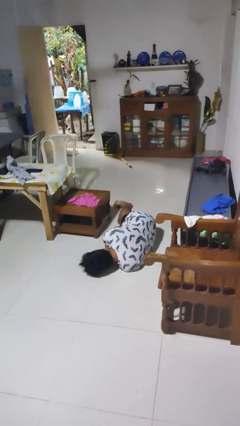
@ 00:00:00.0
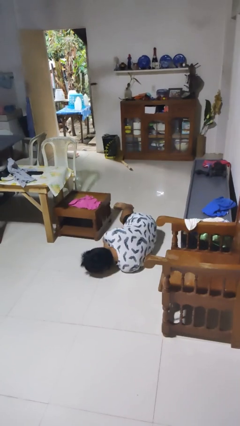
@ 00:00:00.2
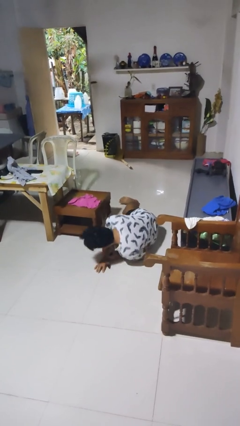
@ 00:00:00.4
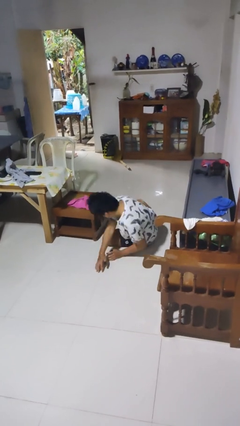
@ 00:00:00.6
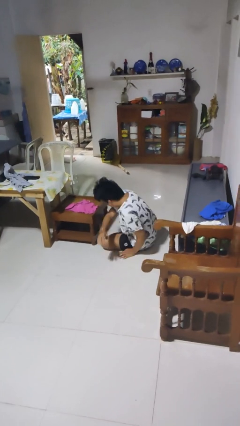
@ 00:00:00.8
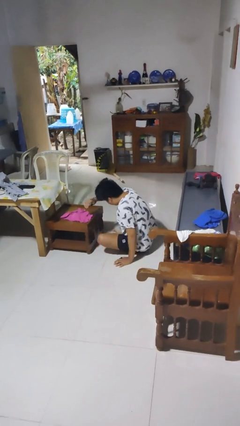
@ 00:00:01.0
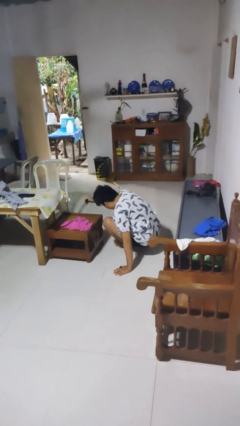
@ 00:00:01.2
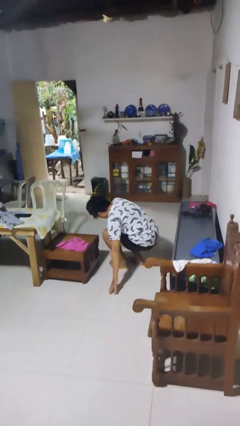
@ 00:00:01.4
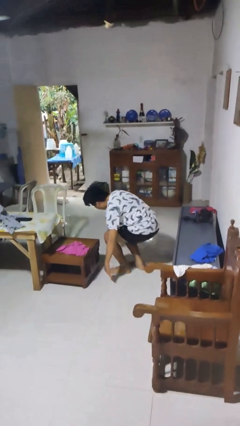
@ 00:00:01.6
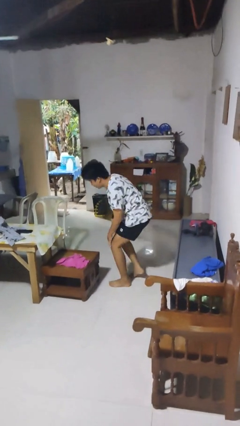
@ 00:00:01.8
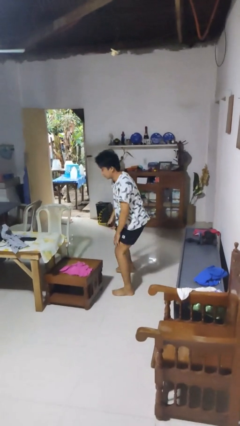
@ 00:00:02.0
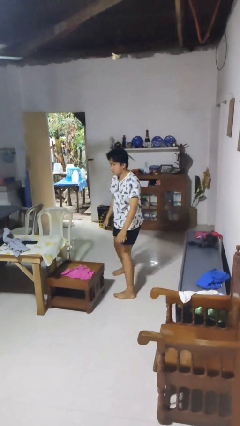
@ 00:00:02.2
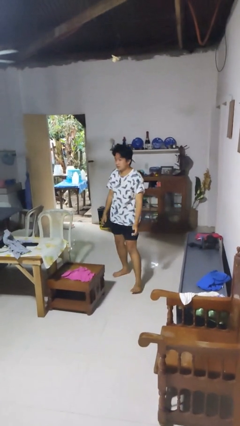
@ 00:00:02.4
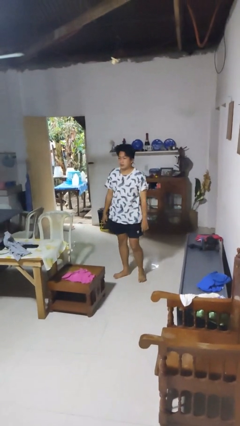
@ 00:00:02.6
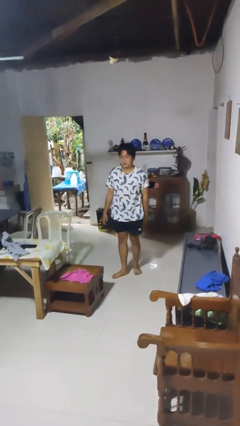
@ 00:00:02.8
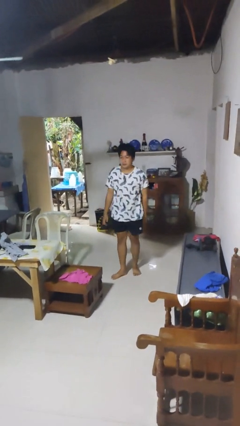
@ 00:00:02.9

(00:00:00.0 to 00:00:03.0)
person stands up from floor

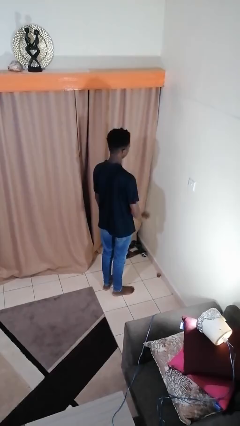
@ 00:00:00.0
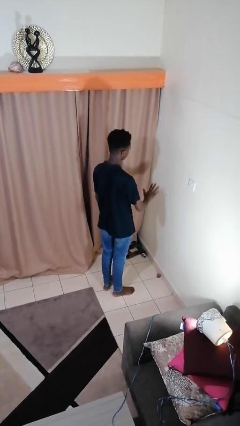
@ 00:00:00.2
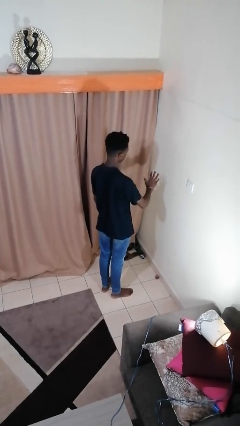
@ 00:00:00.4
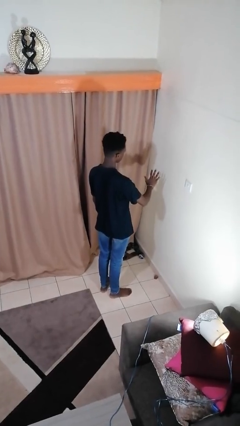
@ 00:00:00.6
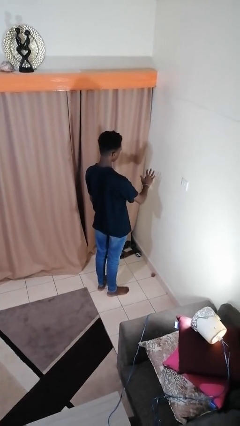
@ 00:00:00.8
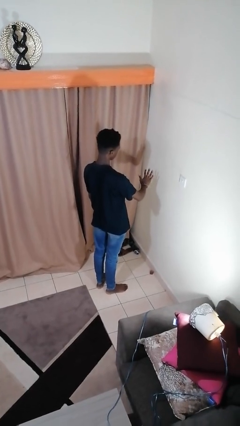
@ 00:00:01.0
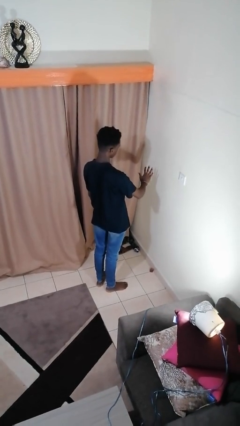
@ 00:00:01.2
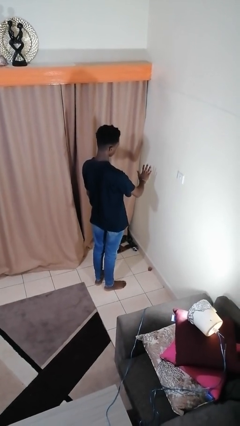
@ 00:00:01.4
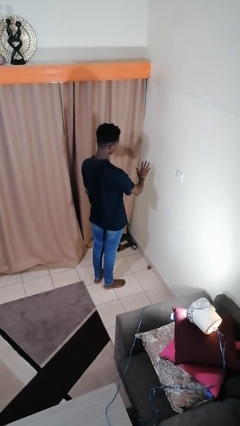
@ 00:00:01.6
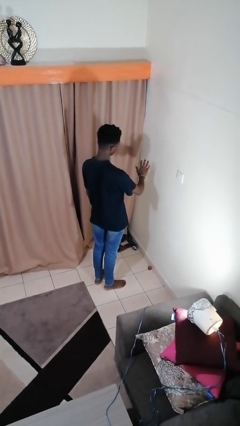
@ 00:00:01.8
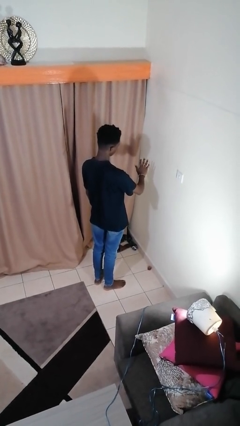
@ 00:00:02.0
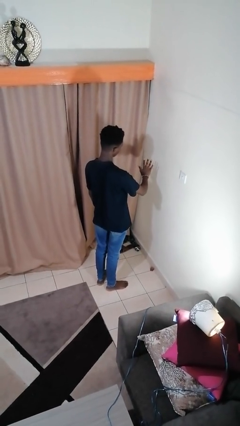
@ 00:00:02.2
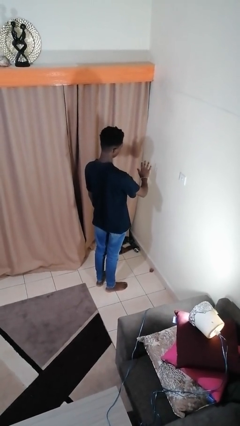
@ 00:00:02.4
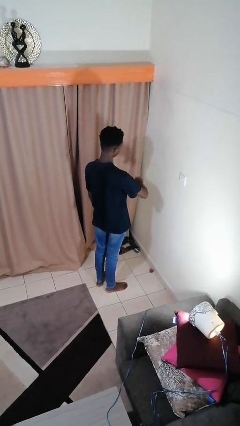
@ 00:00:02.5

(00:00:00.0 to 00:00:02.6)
person gestures number five

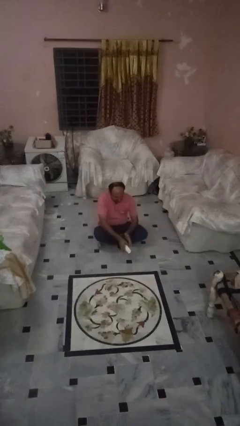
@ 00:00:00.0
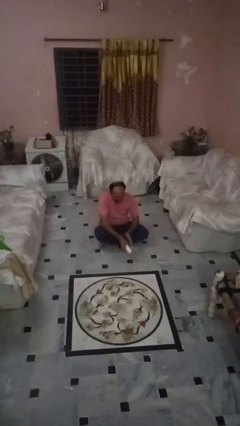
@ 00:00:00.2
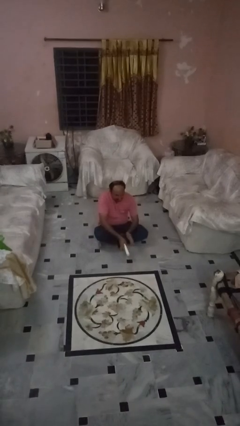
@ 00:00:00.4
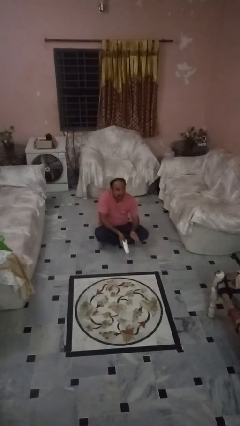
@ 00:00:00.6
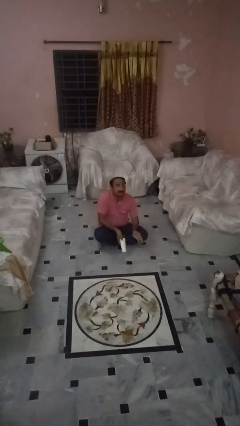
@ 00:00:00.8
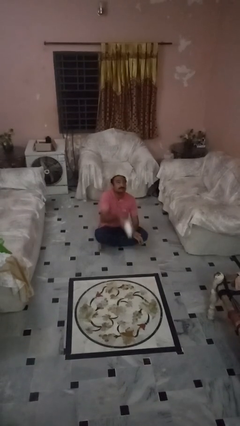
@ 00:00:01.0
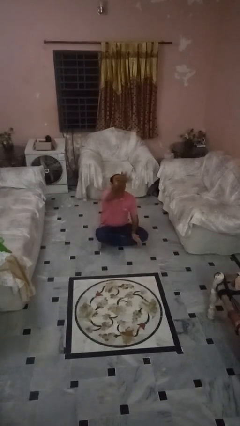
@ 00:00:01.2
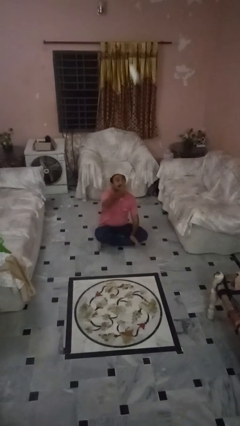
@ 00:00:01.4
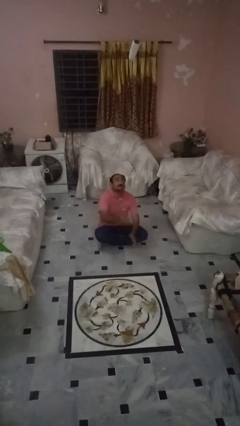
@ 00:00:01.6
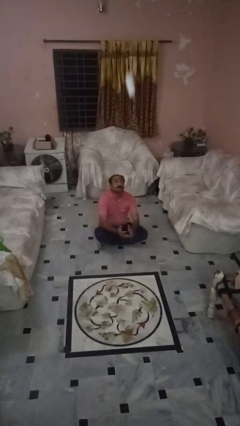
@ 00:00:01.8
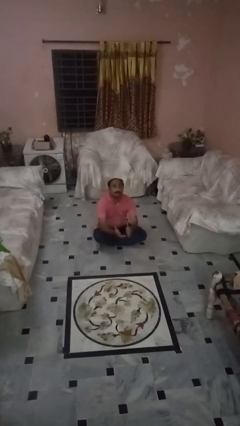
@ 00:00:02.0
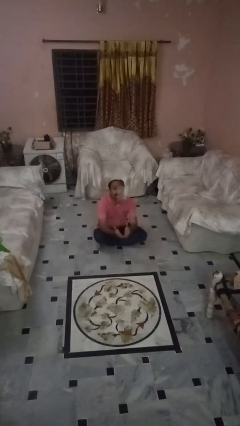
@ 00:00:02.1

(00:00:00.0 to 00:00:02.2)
person drops object

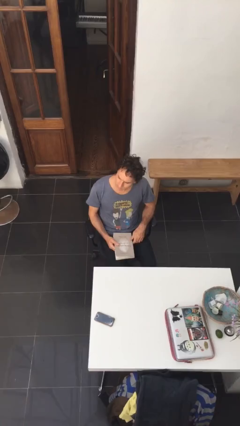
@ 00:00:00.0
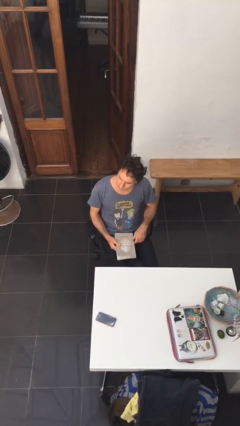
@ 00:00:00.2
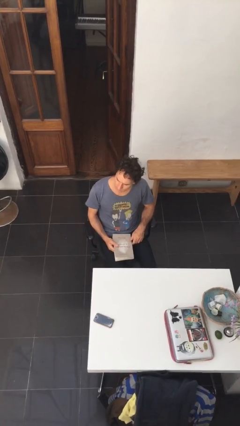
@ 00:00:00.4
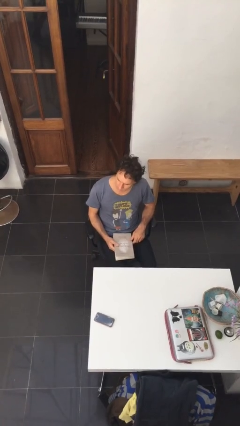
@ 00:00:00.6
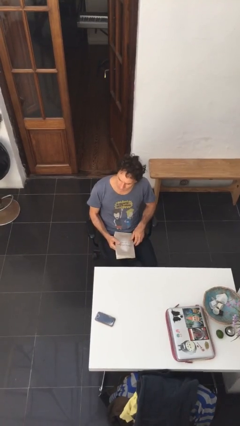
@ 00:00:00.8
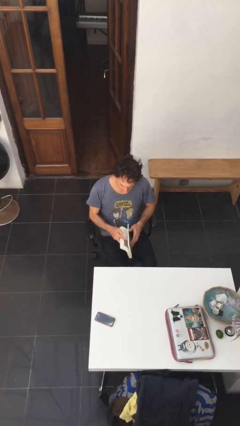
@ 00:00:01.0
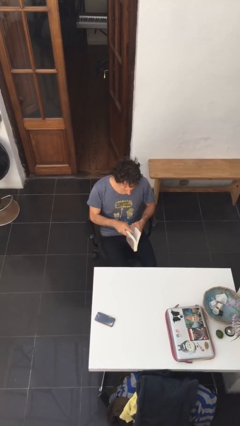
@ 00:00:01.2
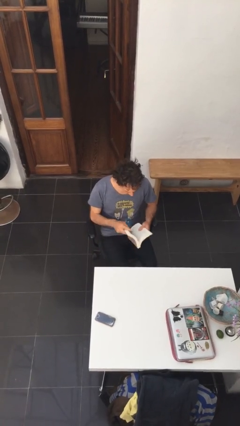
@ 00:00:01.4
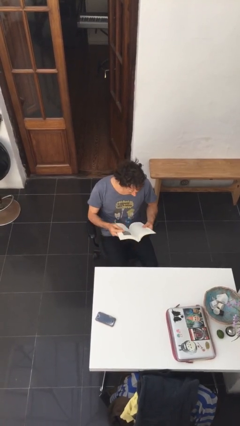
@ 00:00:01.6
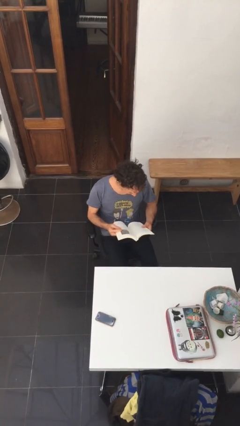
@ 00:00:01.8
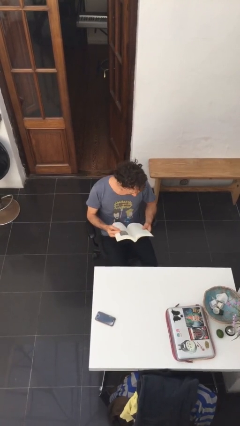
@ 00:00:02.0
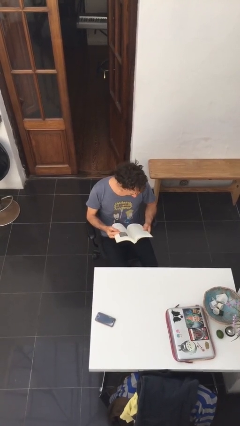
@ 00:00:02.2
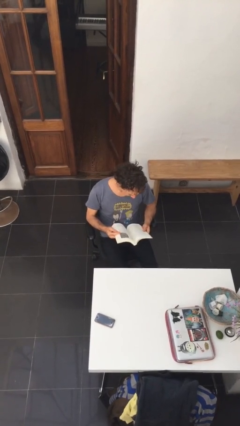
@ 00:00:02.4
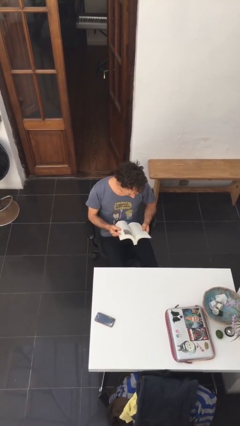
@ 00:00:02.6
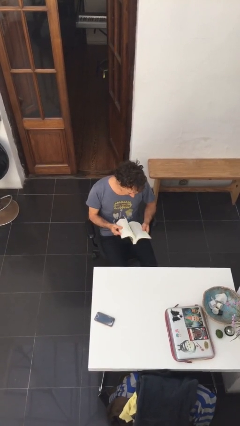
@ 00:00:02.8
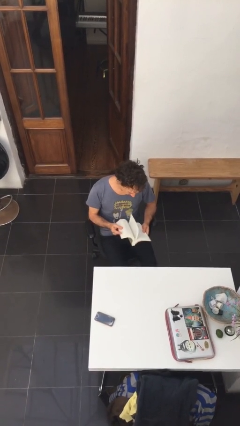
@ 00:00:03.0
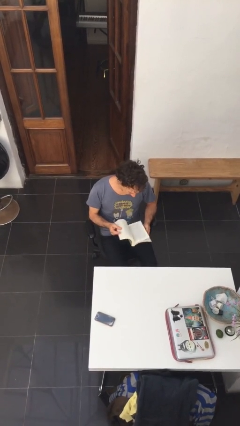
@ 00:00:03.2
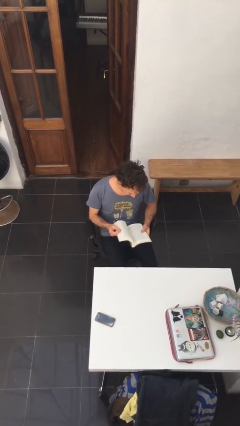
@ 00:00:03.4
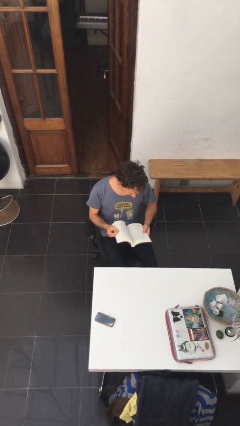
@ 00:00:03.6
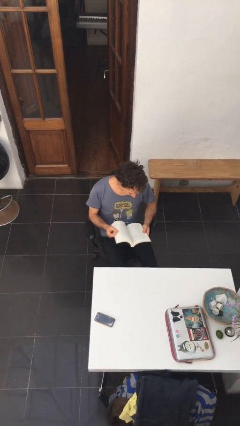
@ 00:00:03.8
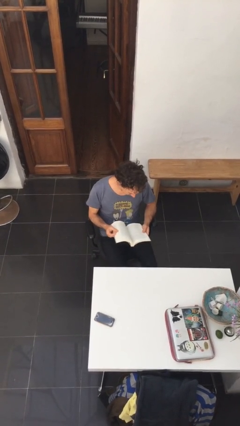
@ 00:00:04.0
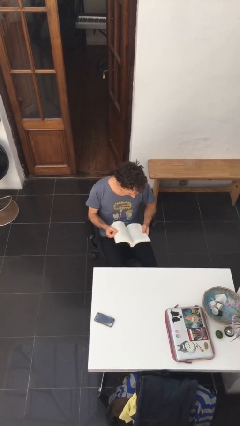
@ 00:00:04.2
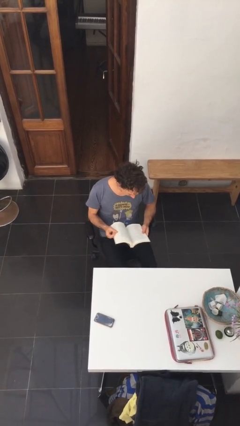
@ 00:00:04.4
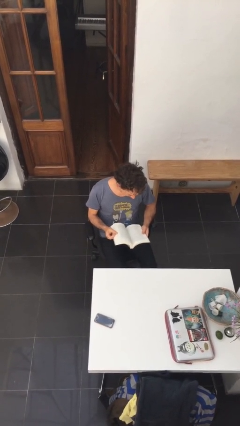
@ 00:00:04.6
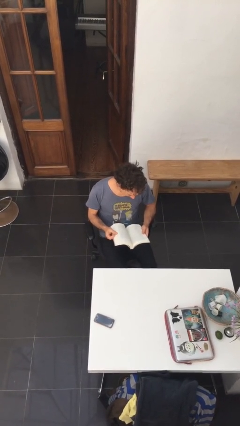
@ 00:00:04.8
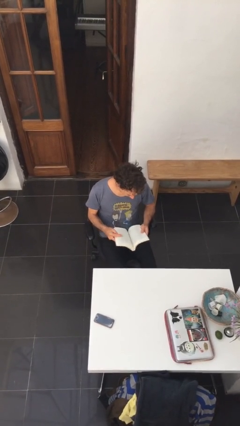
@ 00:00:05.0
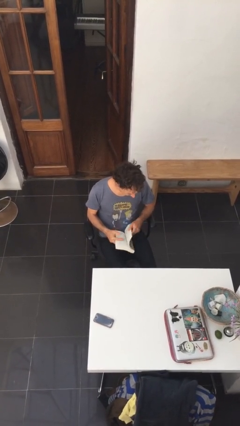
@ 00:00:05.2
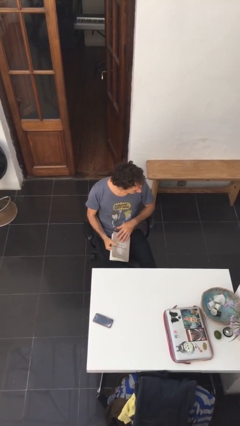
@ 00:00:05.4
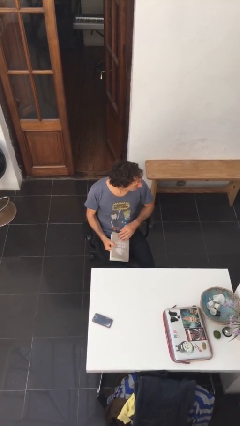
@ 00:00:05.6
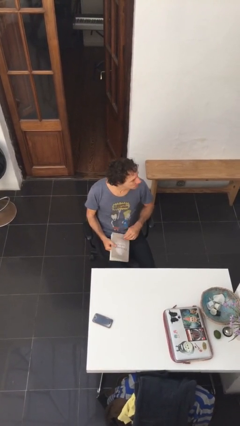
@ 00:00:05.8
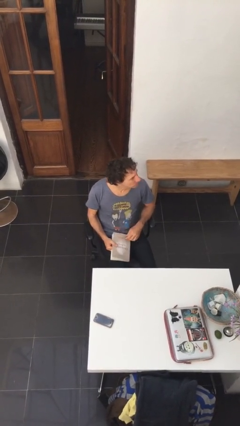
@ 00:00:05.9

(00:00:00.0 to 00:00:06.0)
person reads document

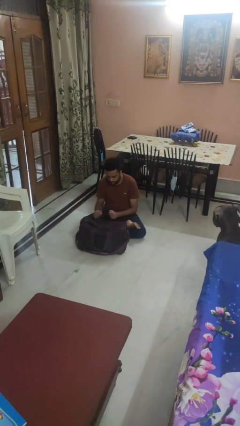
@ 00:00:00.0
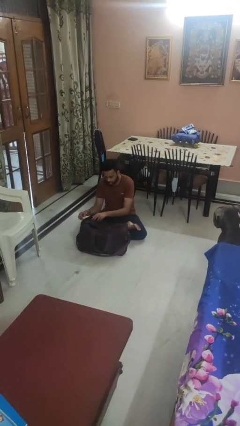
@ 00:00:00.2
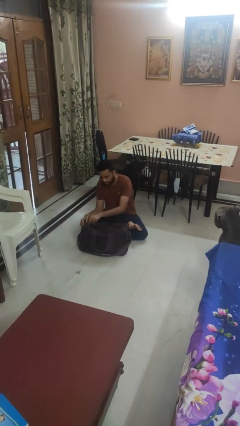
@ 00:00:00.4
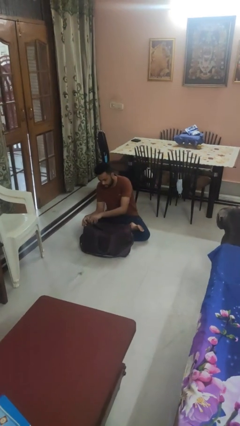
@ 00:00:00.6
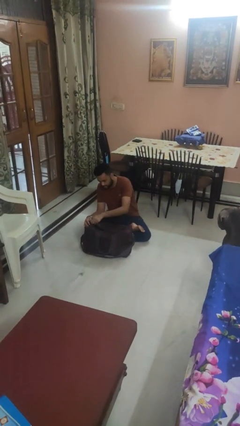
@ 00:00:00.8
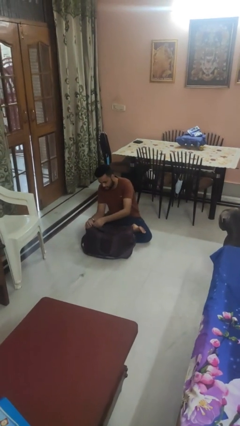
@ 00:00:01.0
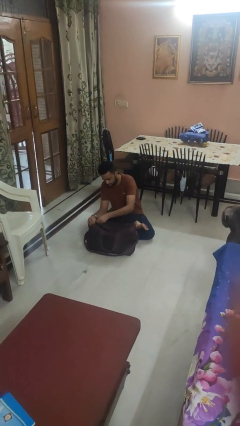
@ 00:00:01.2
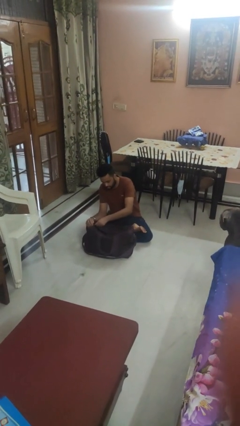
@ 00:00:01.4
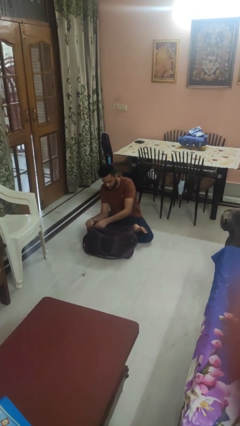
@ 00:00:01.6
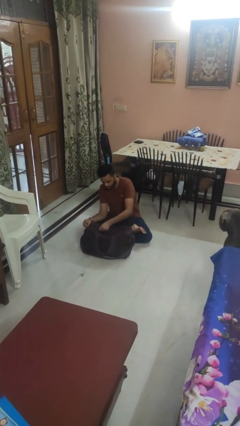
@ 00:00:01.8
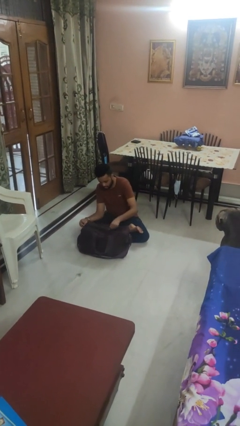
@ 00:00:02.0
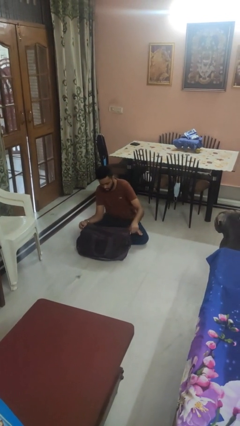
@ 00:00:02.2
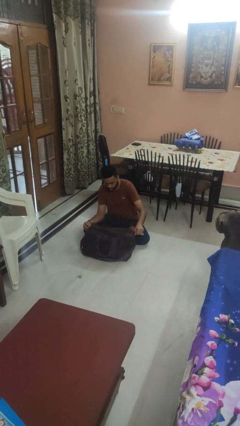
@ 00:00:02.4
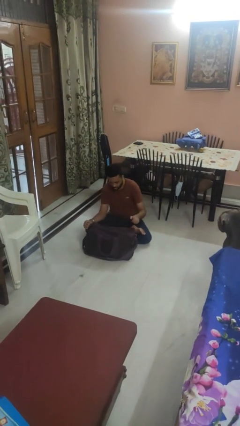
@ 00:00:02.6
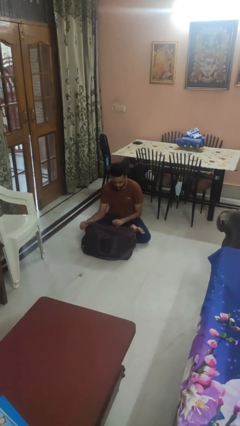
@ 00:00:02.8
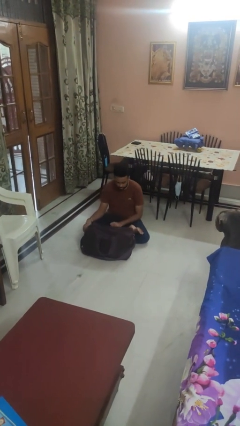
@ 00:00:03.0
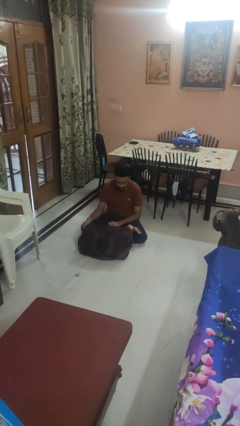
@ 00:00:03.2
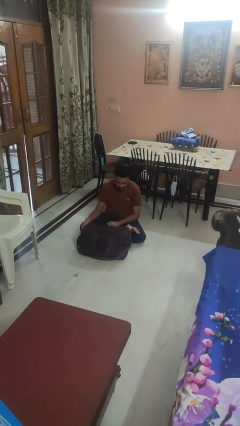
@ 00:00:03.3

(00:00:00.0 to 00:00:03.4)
person closes suitcase

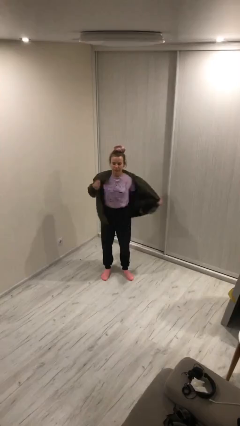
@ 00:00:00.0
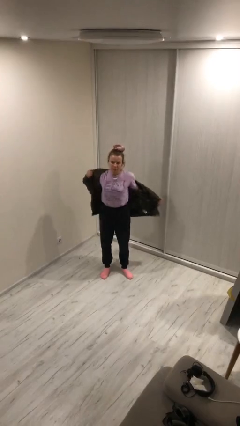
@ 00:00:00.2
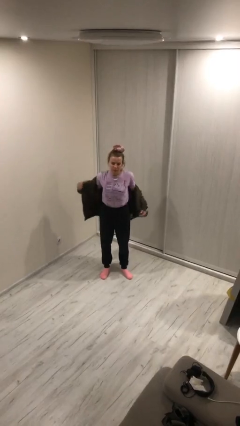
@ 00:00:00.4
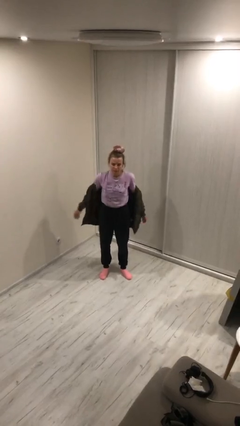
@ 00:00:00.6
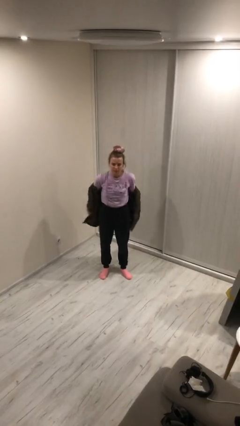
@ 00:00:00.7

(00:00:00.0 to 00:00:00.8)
person takes off jacket
